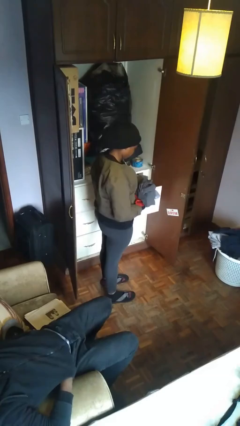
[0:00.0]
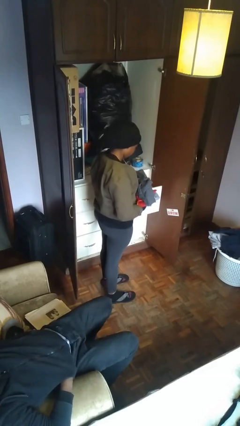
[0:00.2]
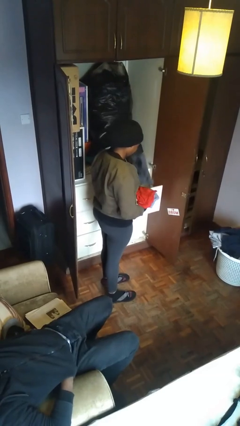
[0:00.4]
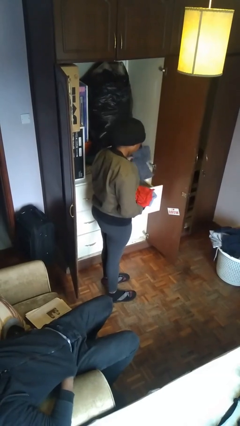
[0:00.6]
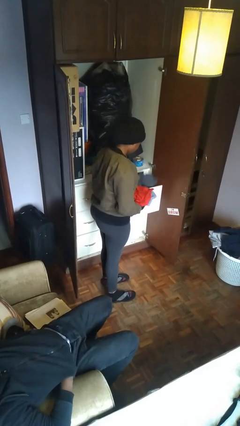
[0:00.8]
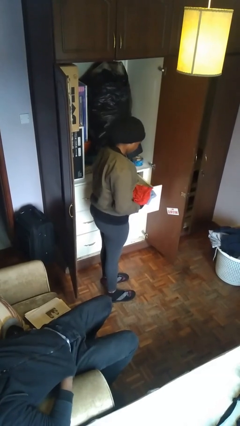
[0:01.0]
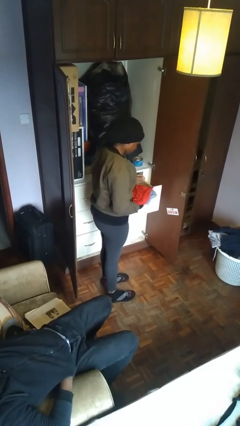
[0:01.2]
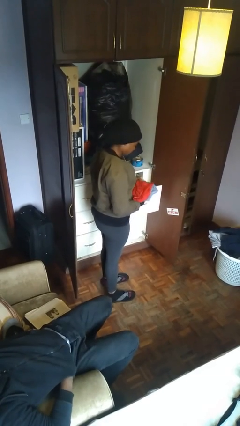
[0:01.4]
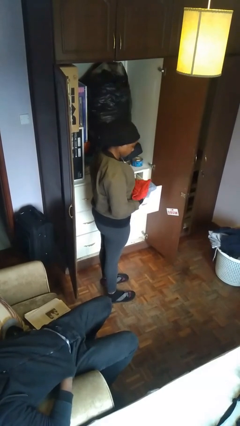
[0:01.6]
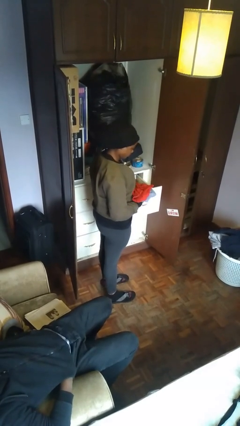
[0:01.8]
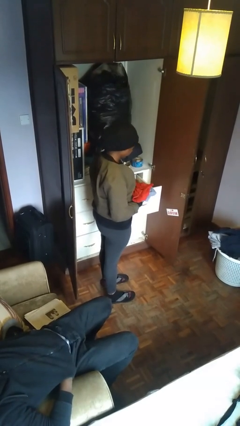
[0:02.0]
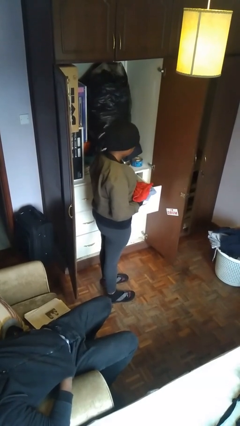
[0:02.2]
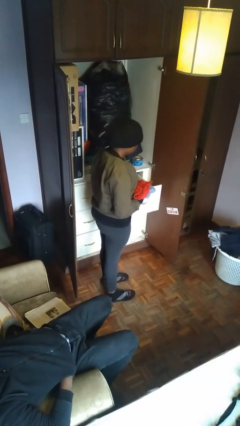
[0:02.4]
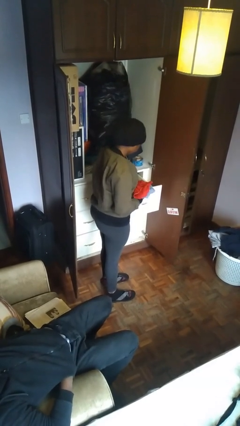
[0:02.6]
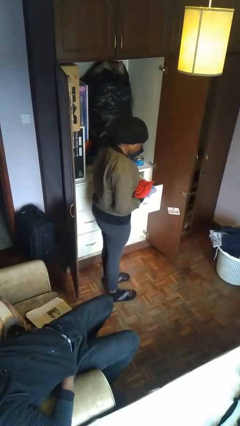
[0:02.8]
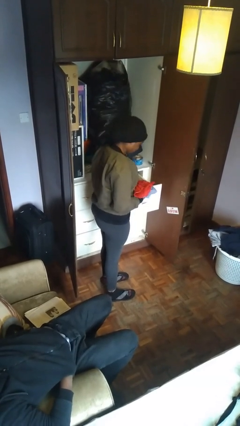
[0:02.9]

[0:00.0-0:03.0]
person puts clothes into dresser

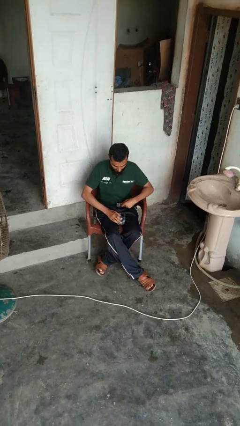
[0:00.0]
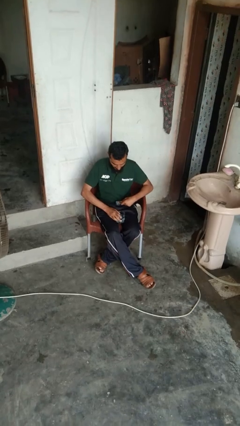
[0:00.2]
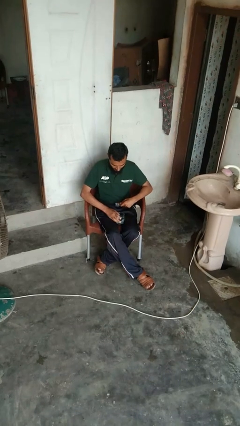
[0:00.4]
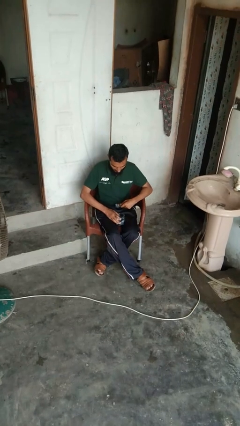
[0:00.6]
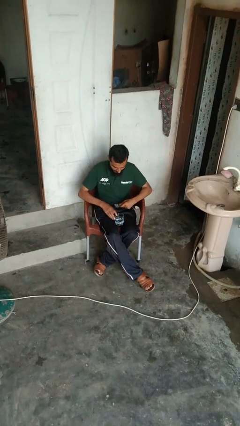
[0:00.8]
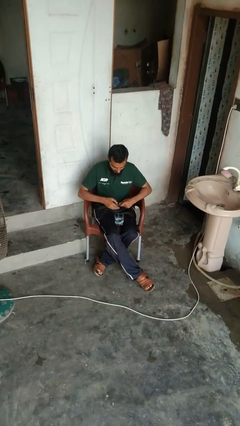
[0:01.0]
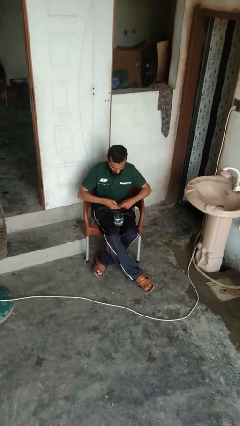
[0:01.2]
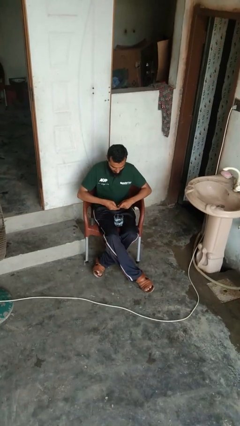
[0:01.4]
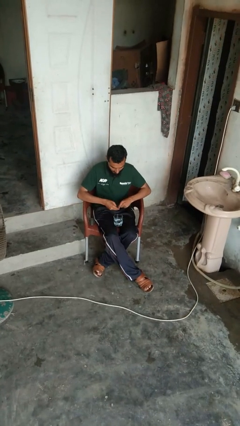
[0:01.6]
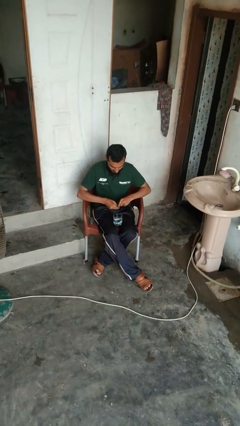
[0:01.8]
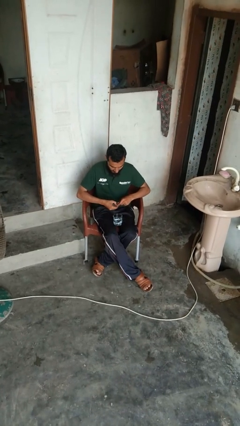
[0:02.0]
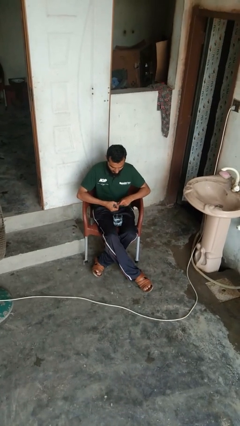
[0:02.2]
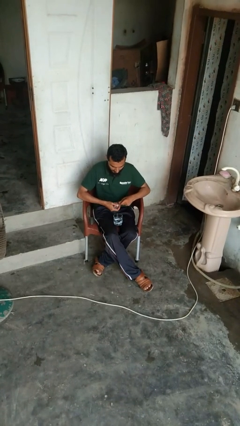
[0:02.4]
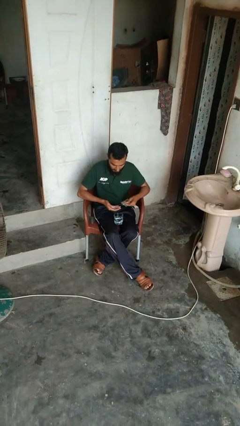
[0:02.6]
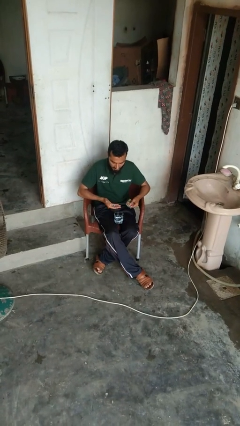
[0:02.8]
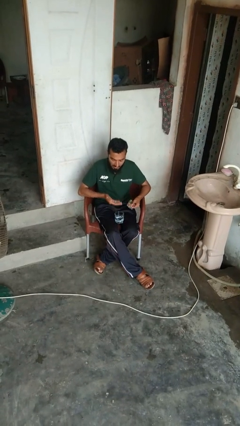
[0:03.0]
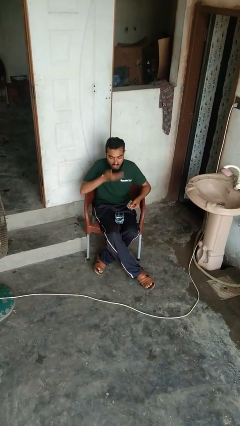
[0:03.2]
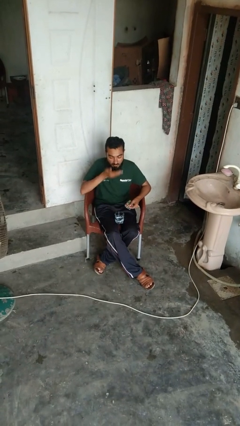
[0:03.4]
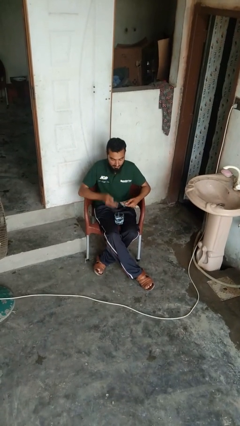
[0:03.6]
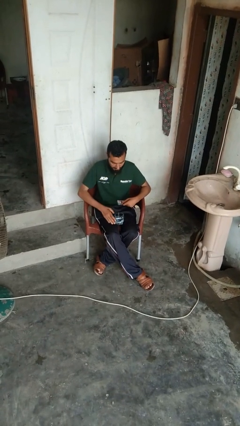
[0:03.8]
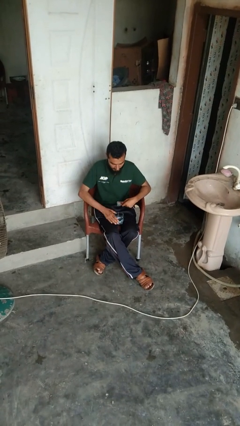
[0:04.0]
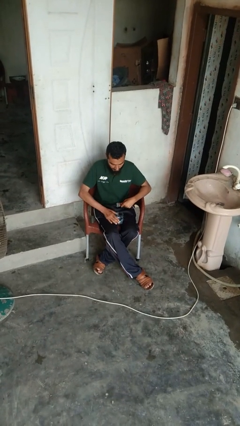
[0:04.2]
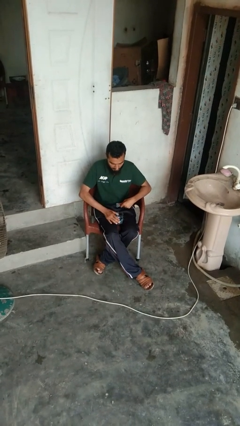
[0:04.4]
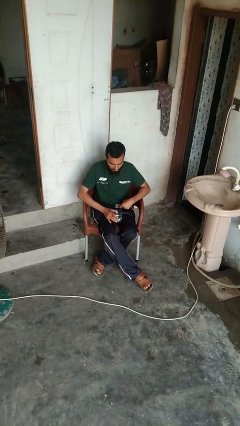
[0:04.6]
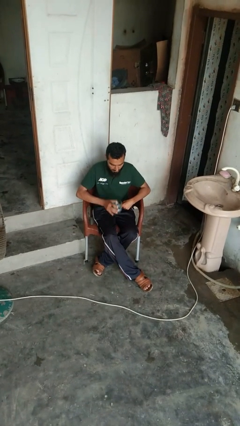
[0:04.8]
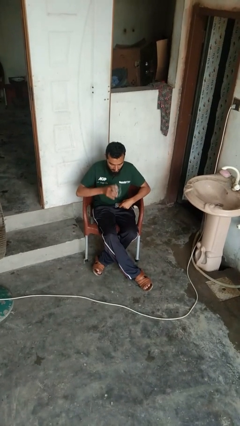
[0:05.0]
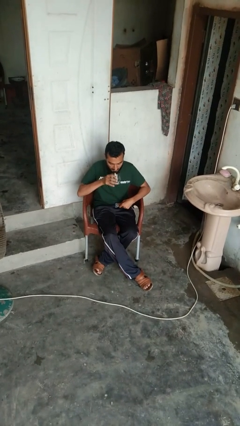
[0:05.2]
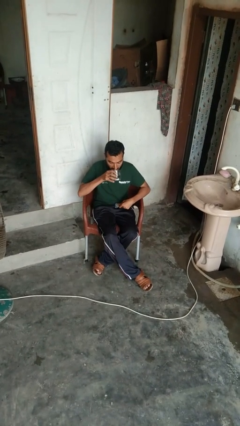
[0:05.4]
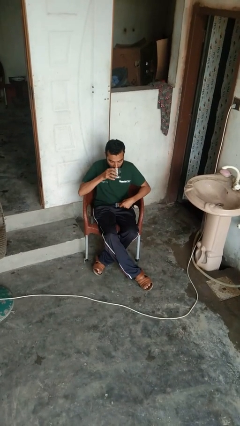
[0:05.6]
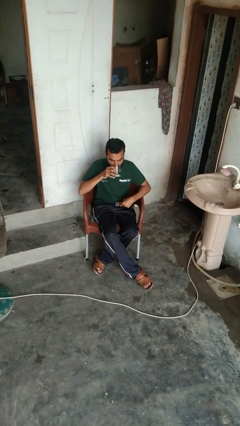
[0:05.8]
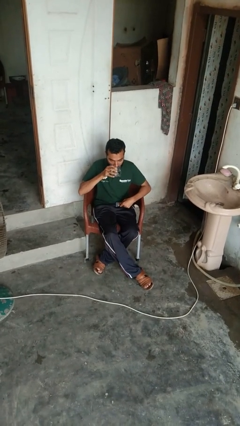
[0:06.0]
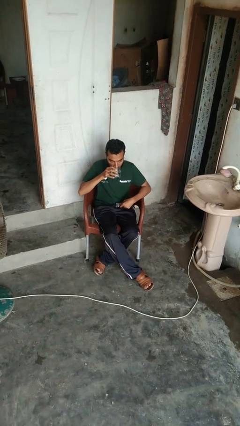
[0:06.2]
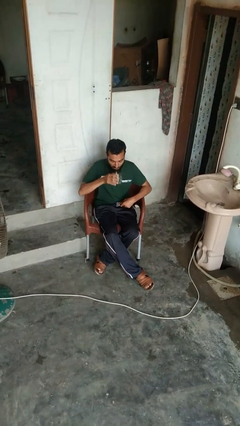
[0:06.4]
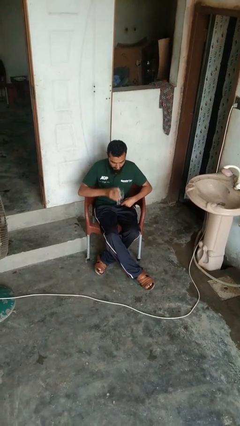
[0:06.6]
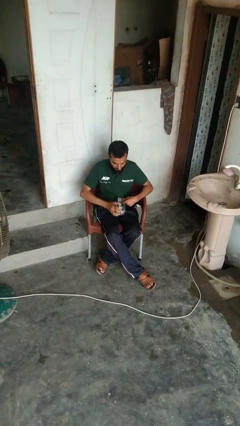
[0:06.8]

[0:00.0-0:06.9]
person takes medicine pills

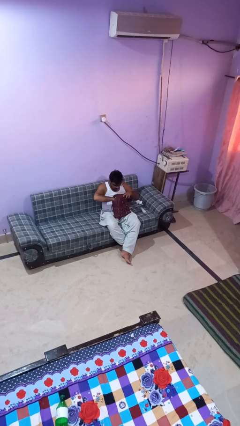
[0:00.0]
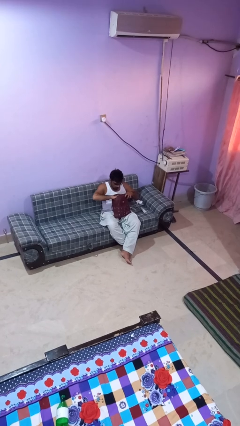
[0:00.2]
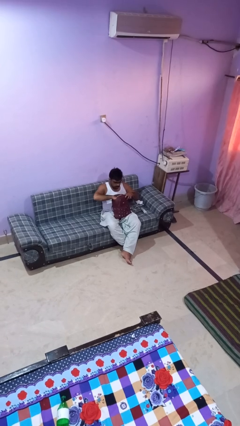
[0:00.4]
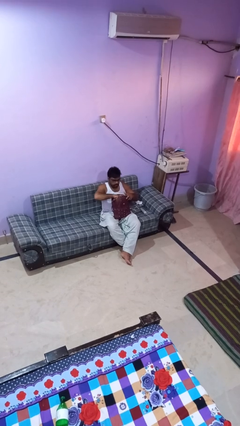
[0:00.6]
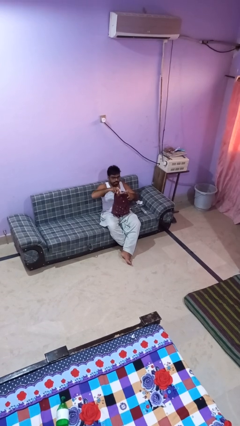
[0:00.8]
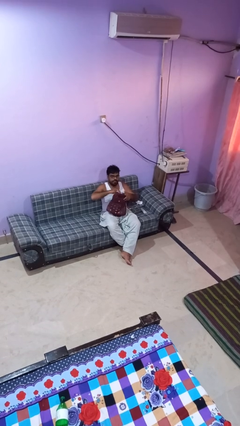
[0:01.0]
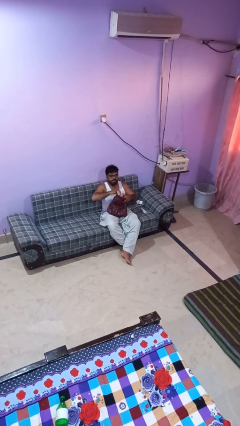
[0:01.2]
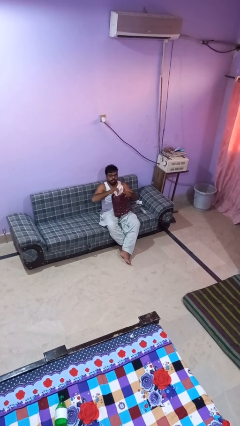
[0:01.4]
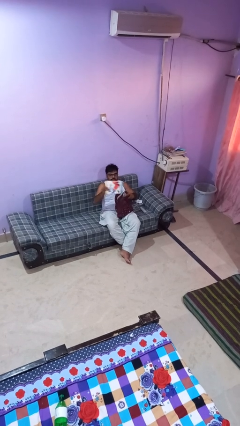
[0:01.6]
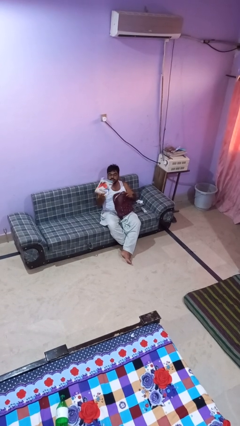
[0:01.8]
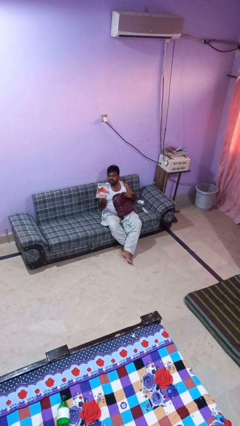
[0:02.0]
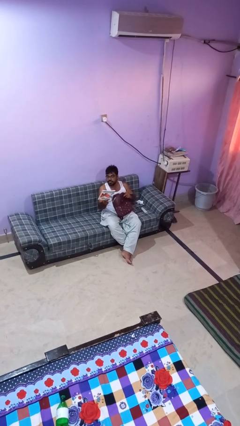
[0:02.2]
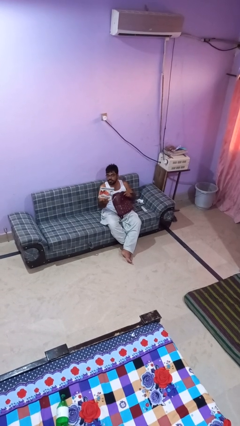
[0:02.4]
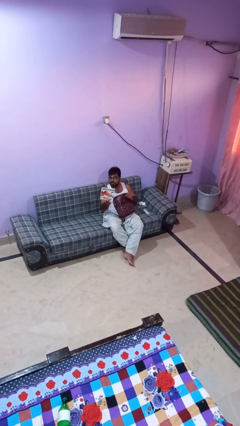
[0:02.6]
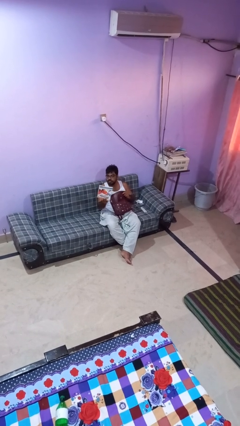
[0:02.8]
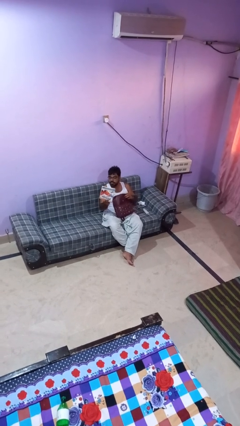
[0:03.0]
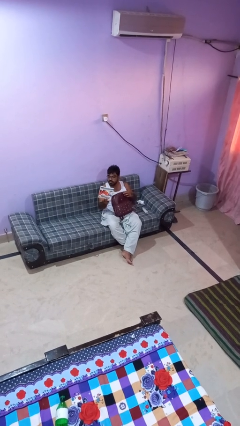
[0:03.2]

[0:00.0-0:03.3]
person takes object from backpack

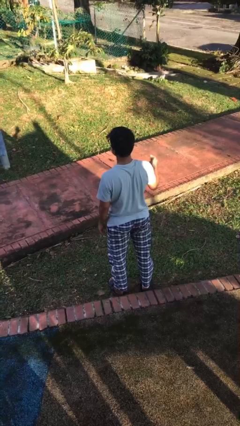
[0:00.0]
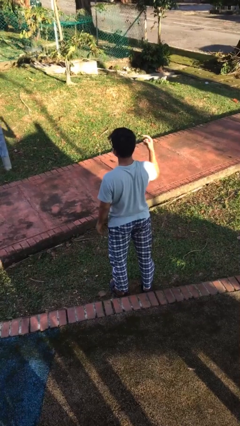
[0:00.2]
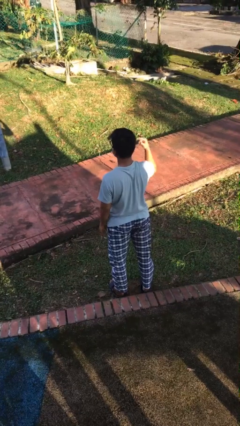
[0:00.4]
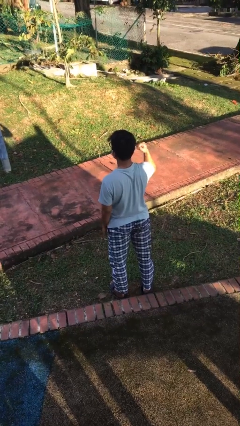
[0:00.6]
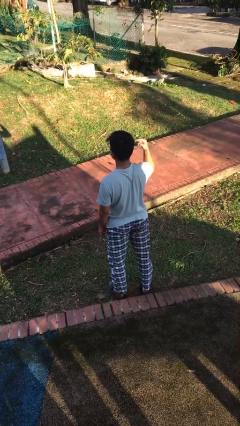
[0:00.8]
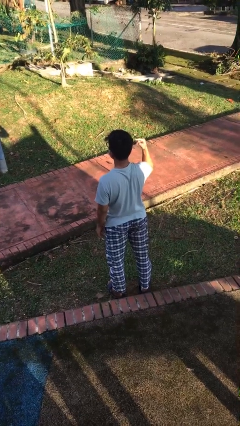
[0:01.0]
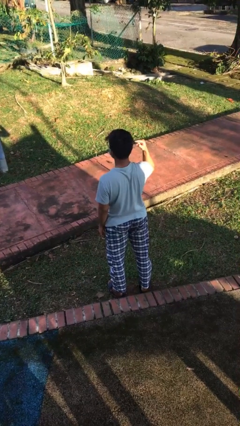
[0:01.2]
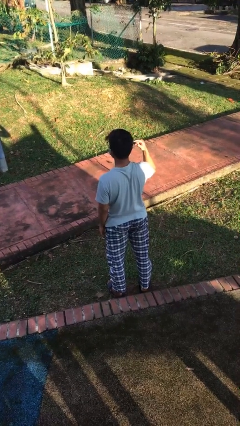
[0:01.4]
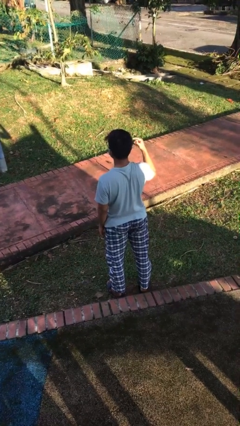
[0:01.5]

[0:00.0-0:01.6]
person gestures listen closely

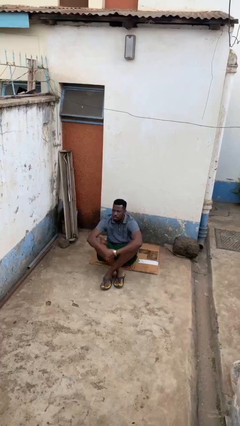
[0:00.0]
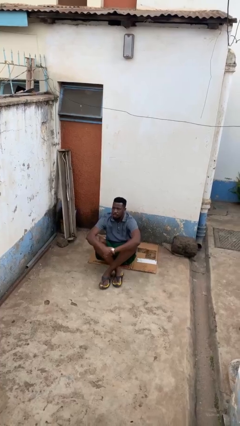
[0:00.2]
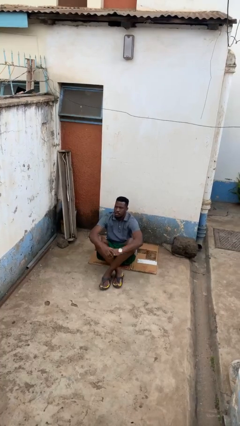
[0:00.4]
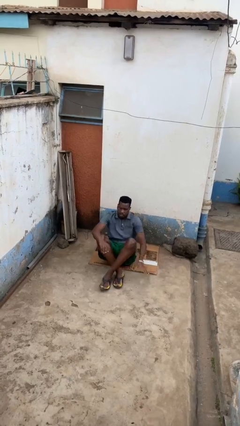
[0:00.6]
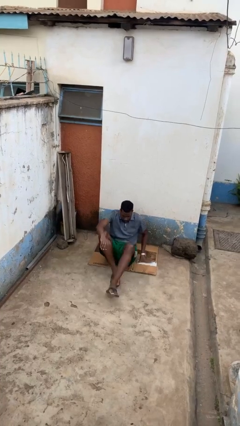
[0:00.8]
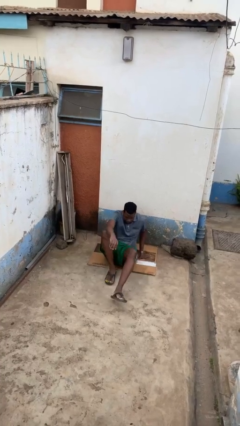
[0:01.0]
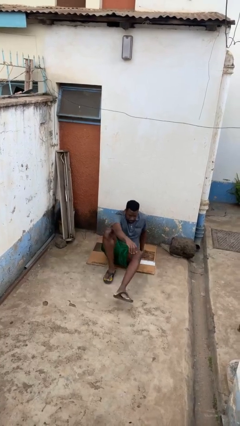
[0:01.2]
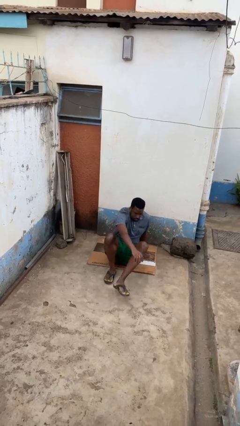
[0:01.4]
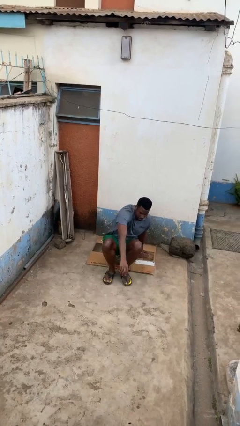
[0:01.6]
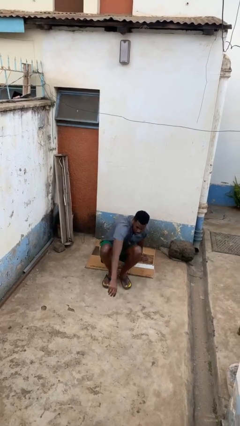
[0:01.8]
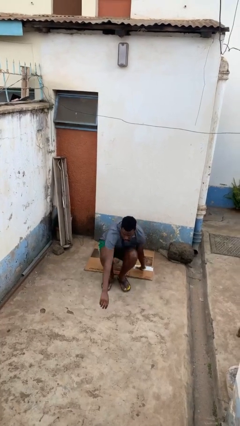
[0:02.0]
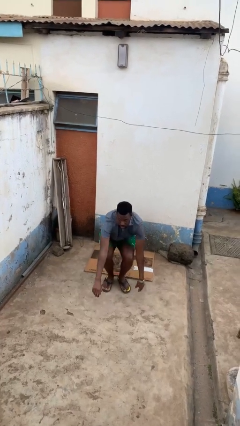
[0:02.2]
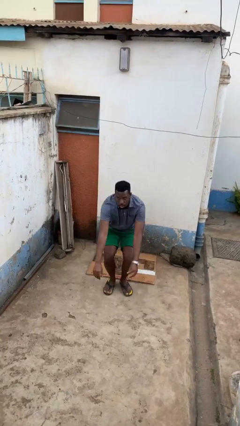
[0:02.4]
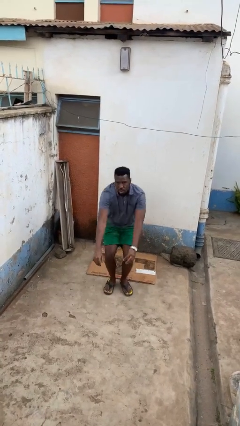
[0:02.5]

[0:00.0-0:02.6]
person stands up from floor

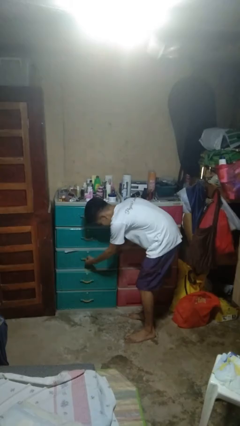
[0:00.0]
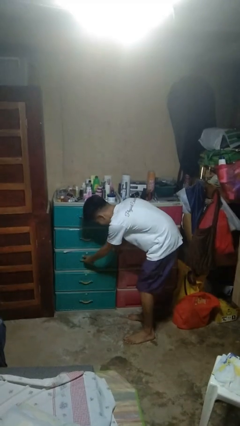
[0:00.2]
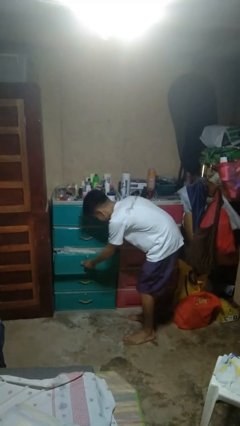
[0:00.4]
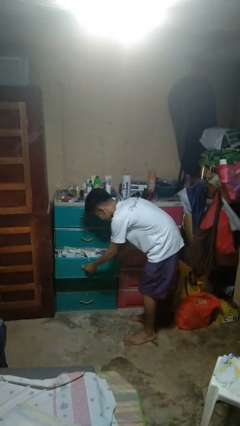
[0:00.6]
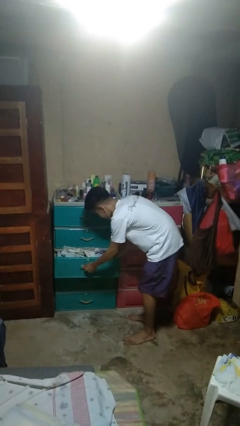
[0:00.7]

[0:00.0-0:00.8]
person opens dresser drawer
